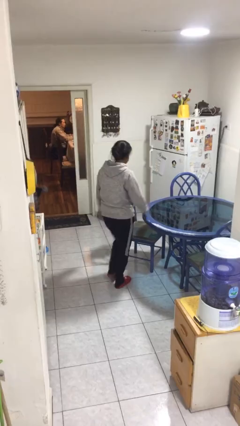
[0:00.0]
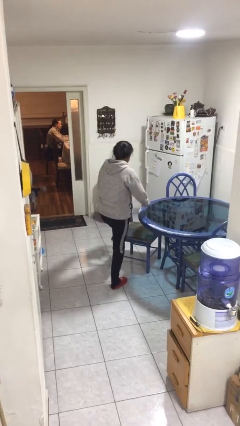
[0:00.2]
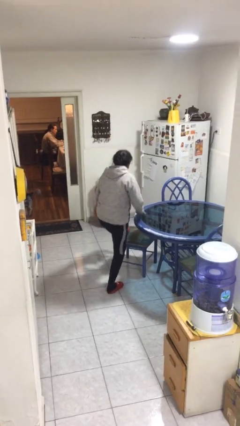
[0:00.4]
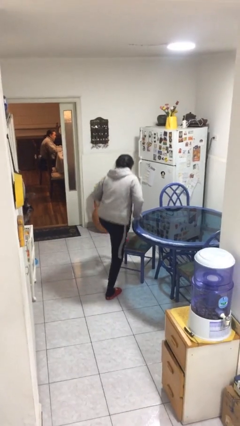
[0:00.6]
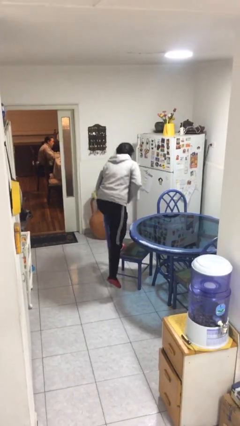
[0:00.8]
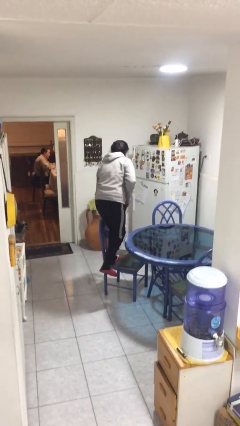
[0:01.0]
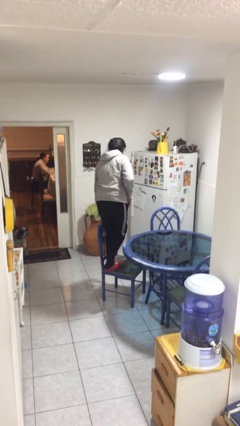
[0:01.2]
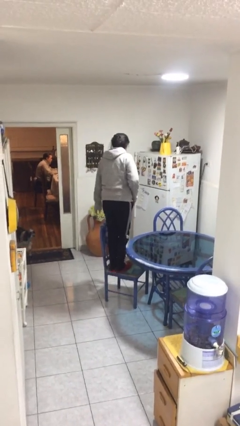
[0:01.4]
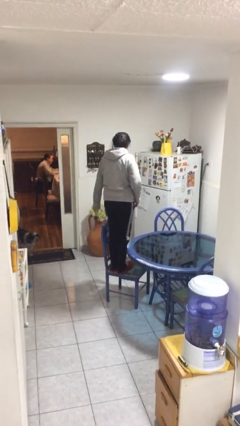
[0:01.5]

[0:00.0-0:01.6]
person climbs on chair

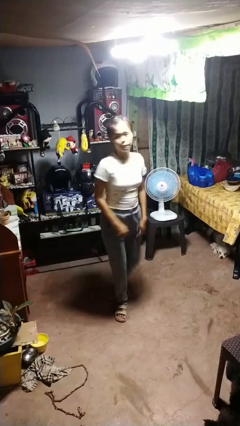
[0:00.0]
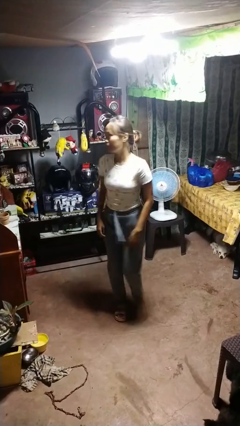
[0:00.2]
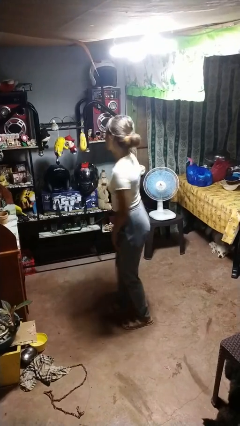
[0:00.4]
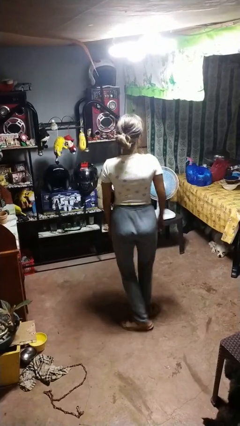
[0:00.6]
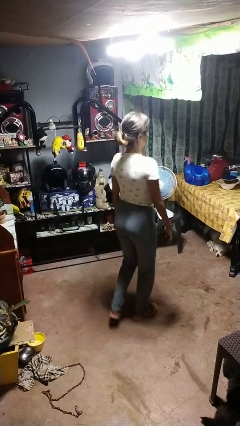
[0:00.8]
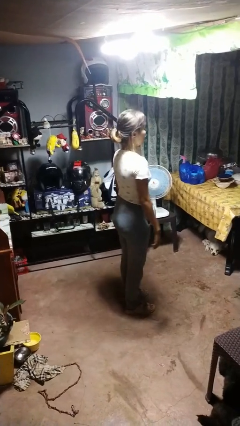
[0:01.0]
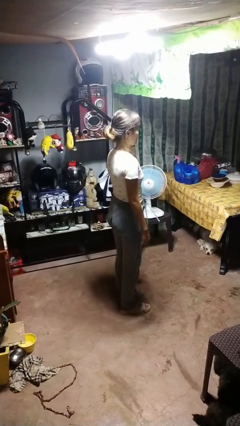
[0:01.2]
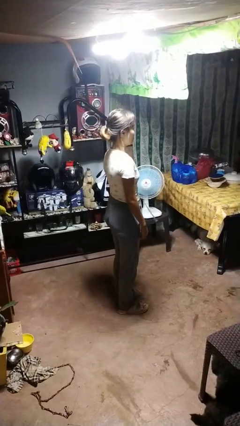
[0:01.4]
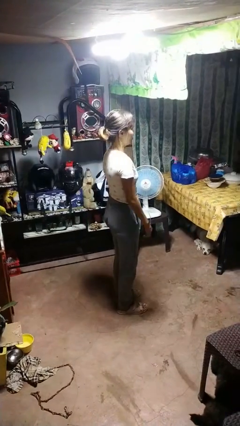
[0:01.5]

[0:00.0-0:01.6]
person twirls

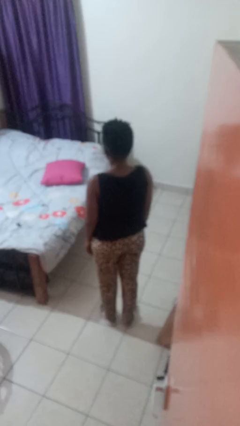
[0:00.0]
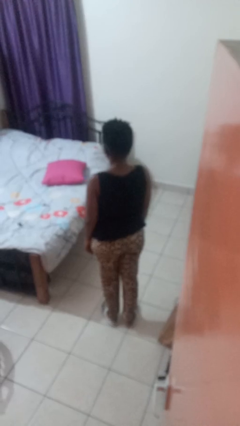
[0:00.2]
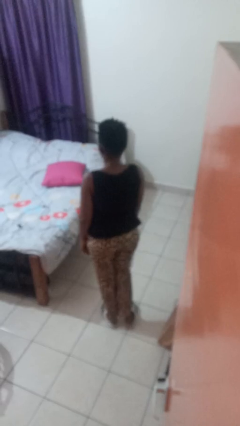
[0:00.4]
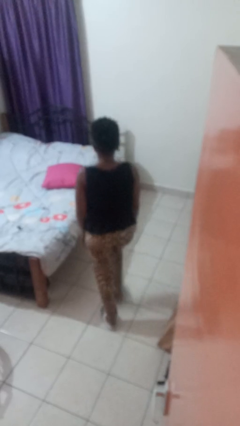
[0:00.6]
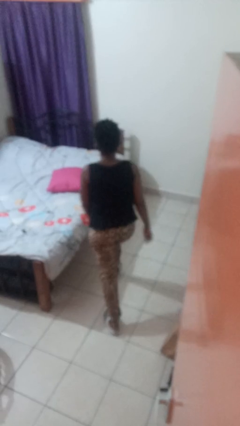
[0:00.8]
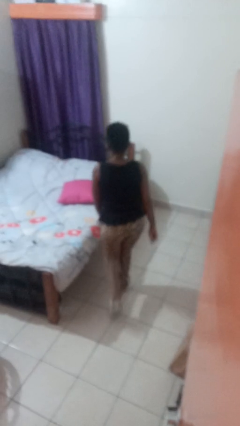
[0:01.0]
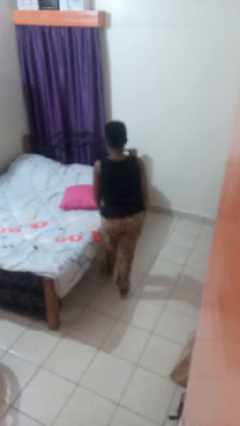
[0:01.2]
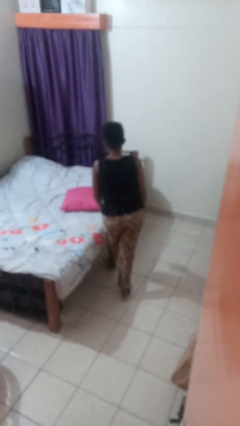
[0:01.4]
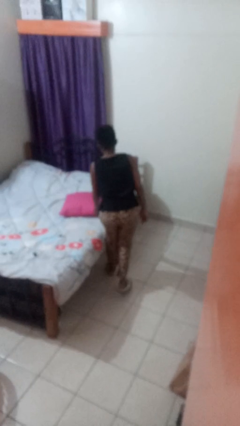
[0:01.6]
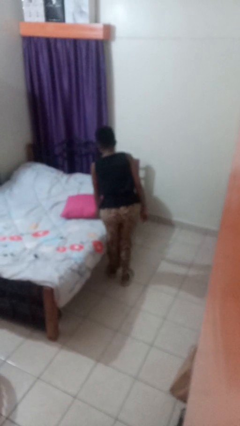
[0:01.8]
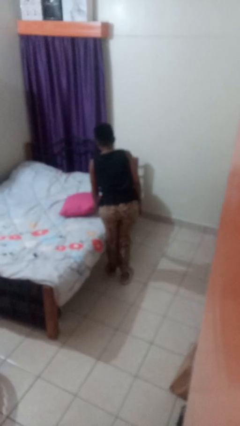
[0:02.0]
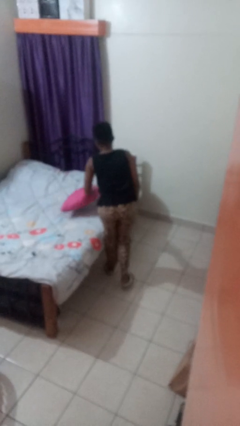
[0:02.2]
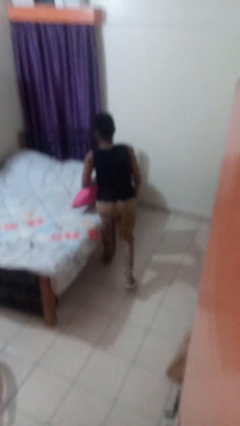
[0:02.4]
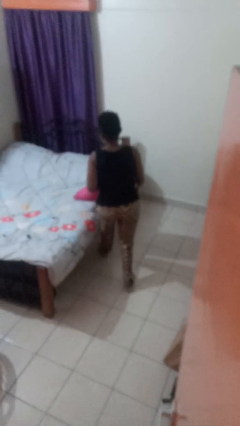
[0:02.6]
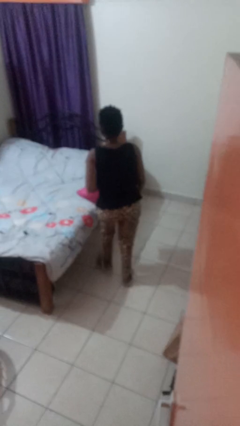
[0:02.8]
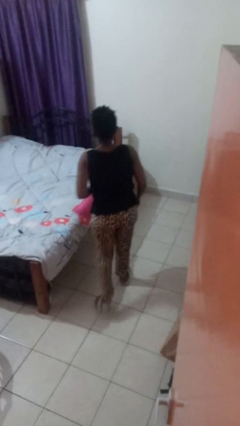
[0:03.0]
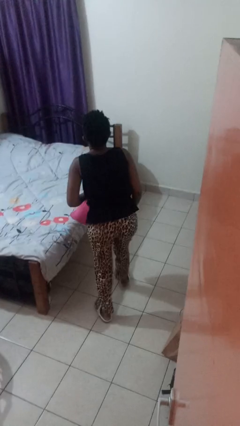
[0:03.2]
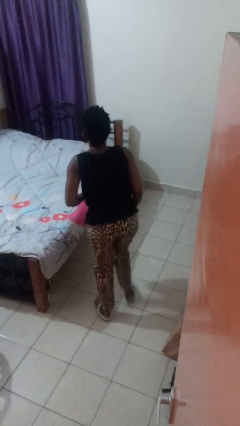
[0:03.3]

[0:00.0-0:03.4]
person picks up object from bed

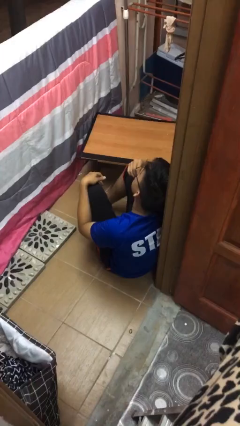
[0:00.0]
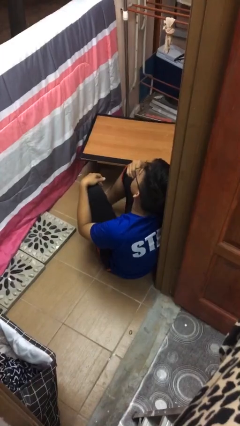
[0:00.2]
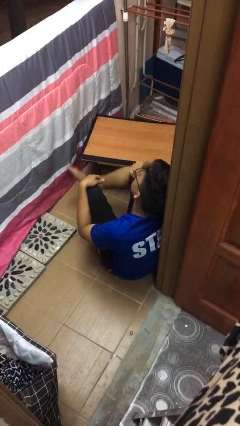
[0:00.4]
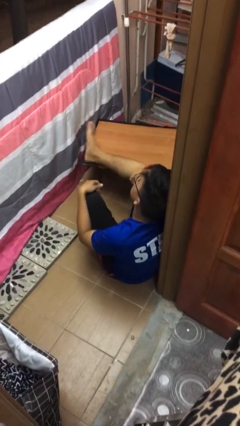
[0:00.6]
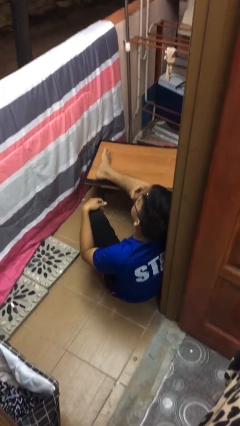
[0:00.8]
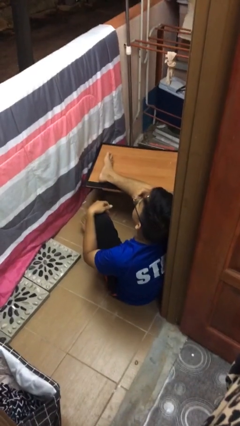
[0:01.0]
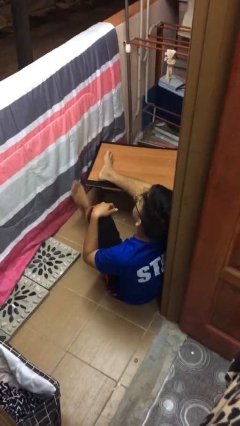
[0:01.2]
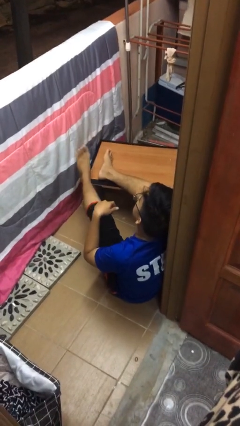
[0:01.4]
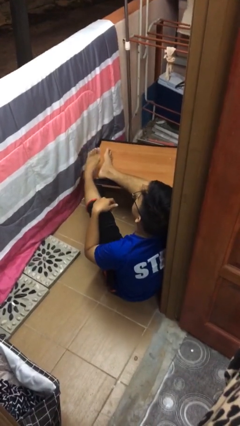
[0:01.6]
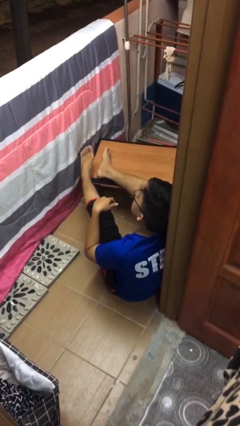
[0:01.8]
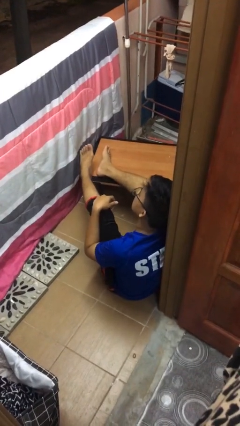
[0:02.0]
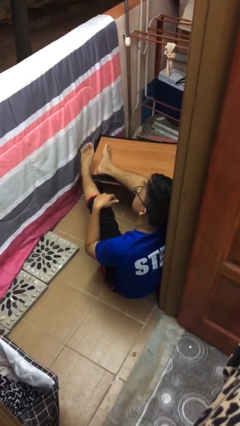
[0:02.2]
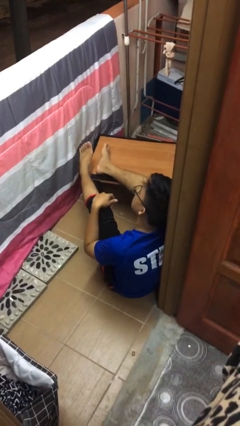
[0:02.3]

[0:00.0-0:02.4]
person puts feet up

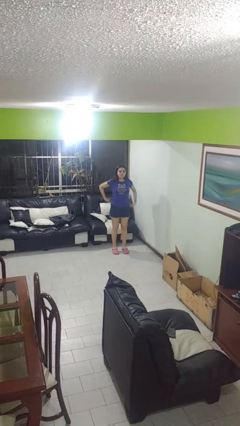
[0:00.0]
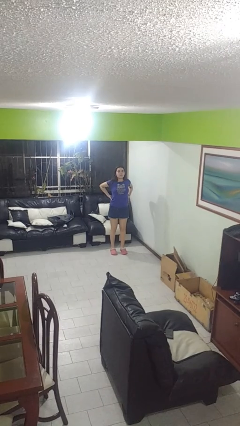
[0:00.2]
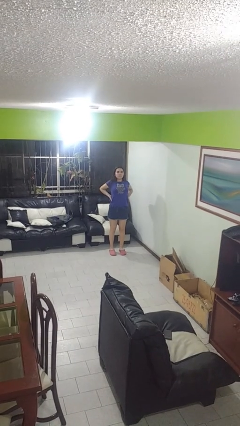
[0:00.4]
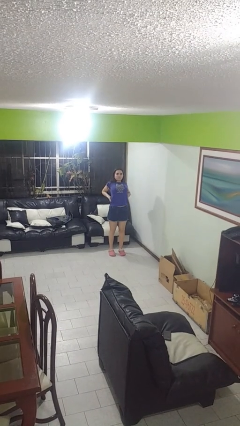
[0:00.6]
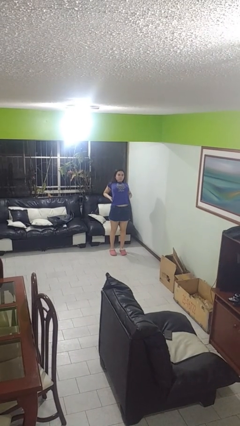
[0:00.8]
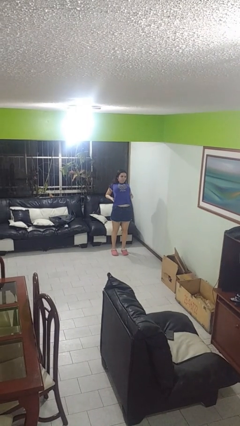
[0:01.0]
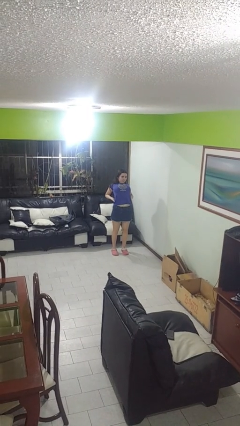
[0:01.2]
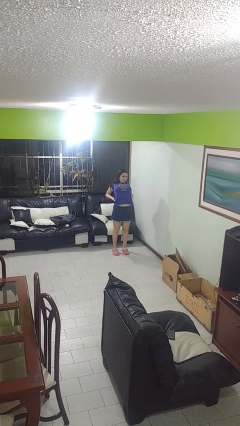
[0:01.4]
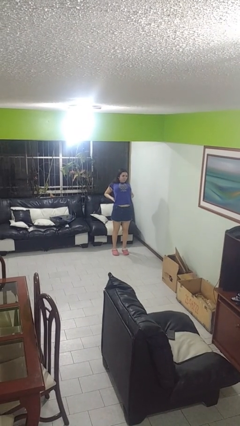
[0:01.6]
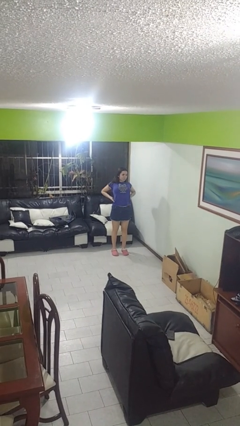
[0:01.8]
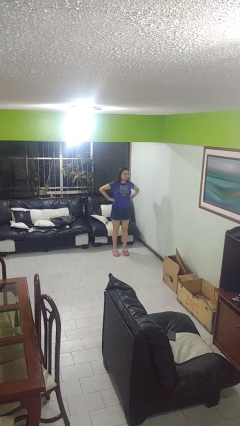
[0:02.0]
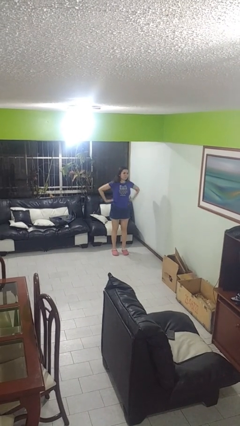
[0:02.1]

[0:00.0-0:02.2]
person stretches back

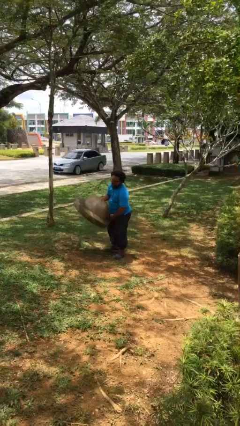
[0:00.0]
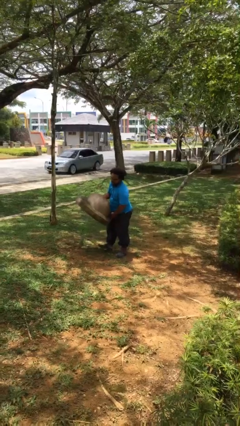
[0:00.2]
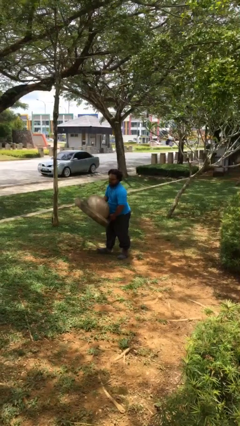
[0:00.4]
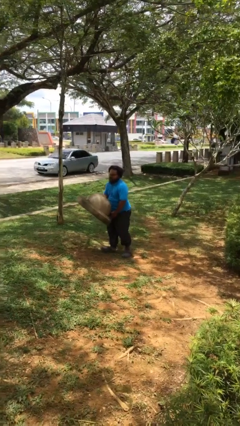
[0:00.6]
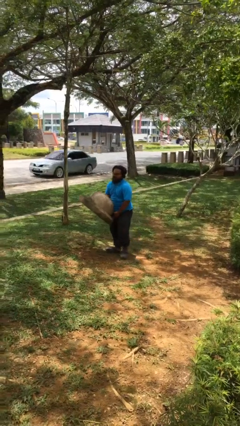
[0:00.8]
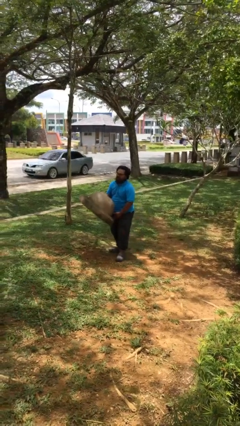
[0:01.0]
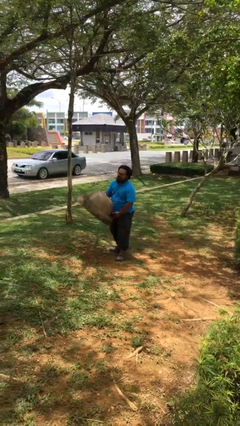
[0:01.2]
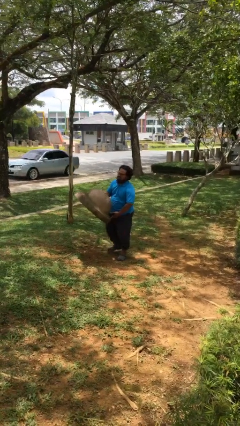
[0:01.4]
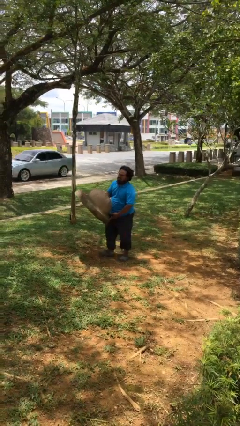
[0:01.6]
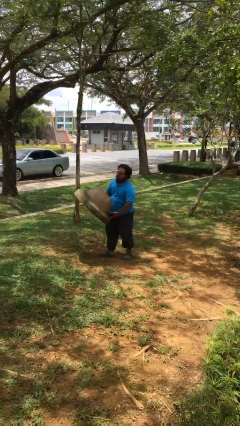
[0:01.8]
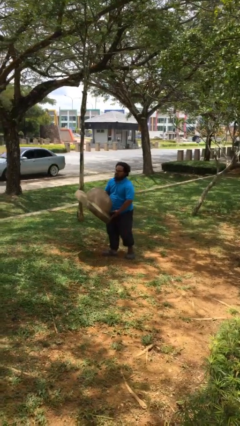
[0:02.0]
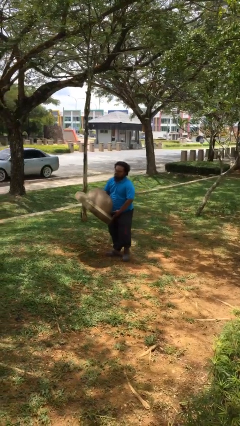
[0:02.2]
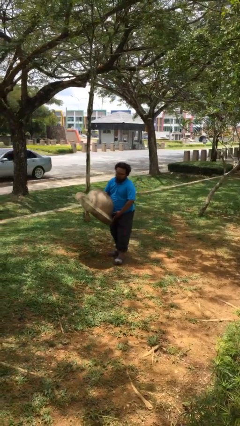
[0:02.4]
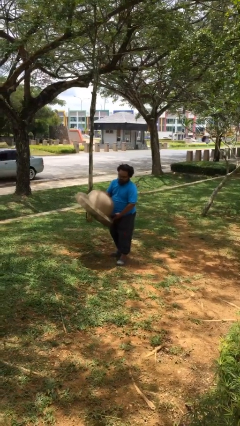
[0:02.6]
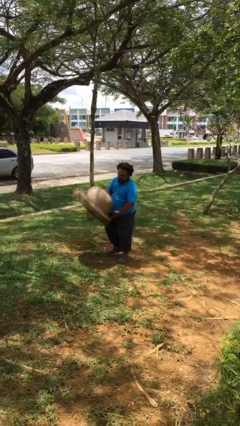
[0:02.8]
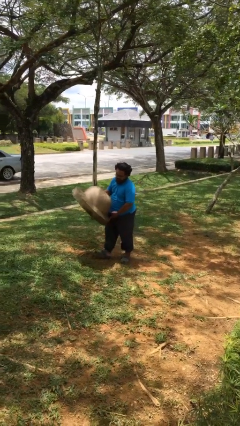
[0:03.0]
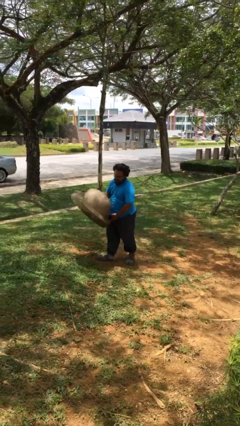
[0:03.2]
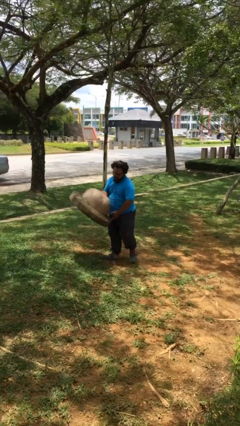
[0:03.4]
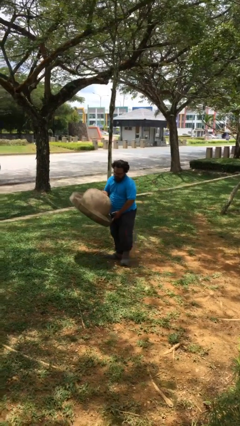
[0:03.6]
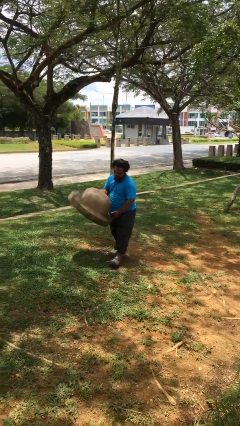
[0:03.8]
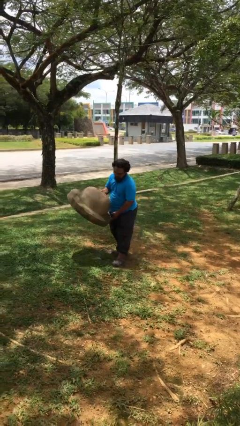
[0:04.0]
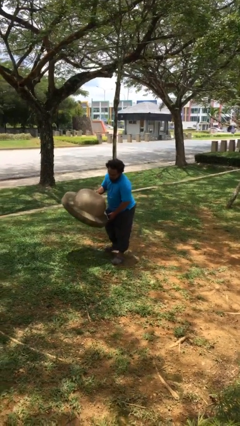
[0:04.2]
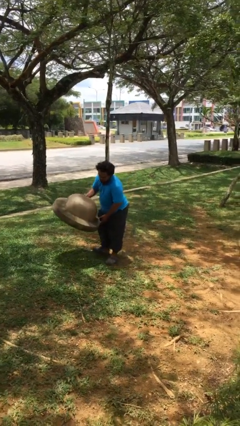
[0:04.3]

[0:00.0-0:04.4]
person carries heavy object

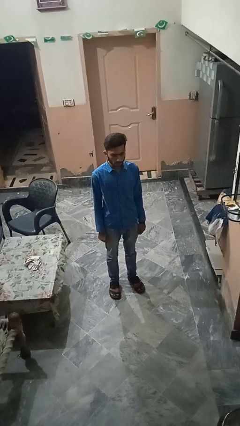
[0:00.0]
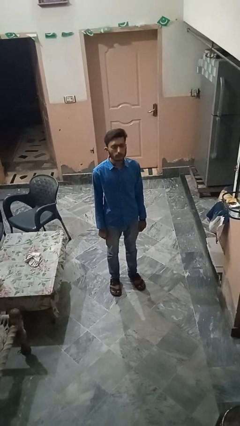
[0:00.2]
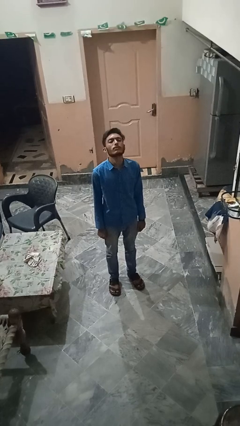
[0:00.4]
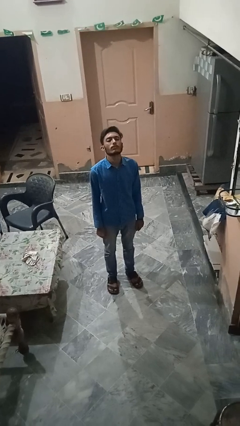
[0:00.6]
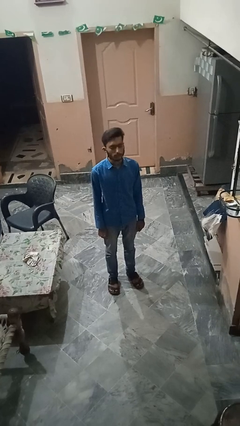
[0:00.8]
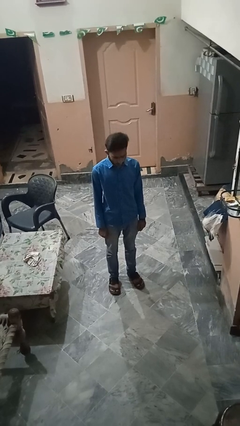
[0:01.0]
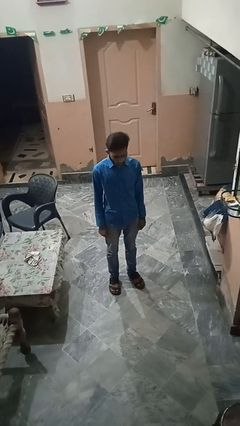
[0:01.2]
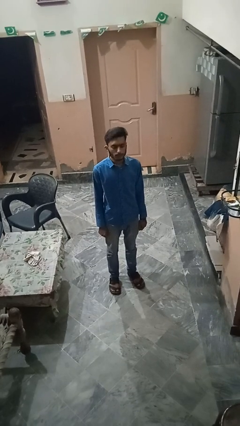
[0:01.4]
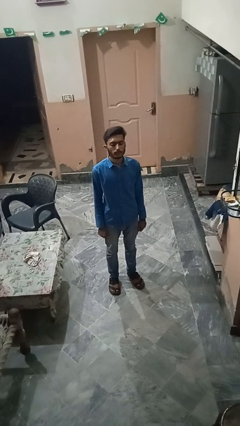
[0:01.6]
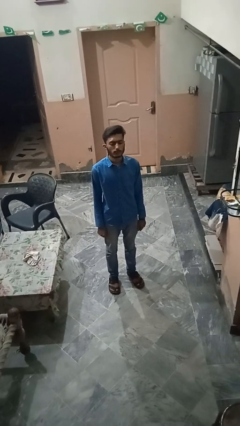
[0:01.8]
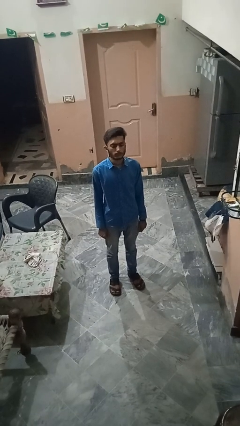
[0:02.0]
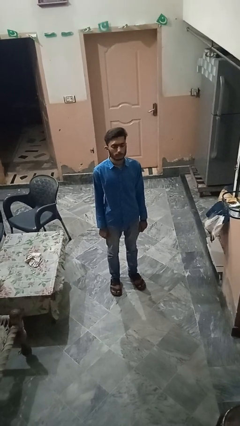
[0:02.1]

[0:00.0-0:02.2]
person nods head
